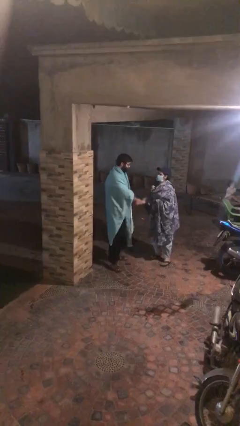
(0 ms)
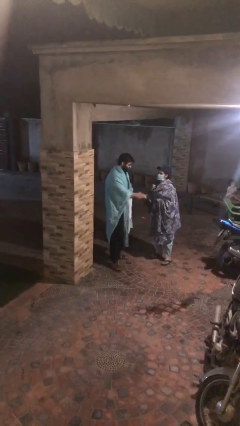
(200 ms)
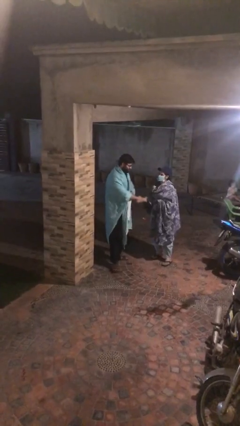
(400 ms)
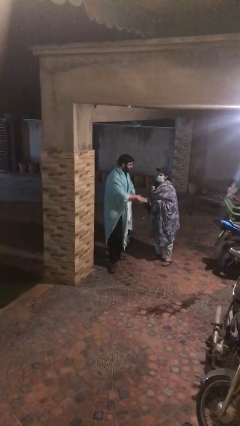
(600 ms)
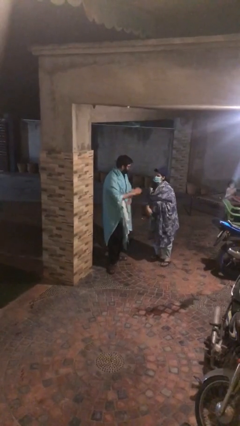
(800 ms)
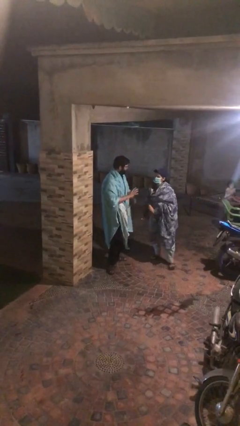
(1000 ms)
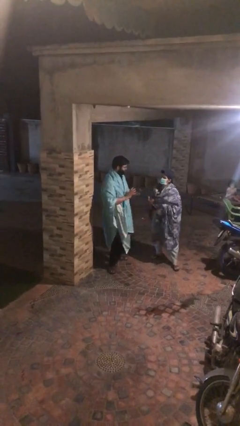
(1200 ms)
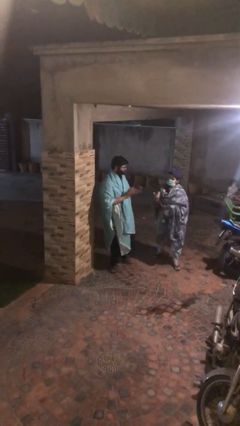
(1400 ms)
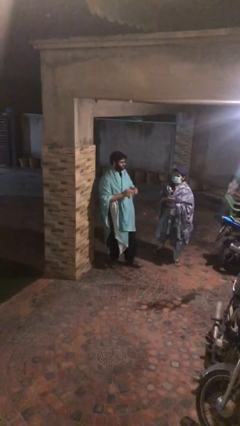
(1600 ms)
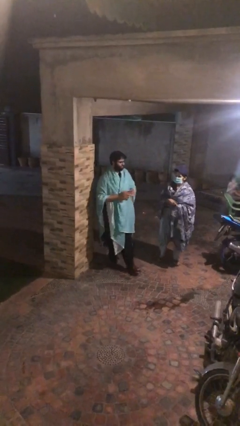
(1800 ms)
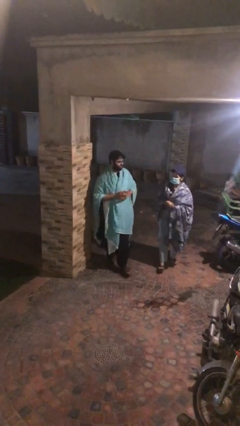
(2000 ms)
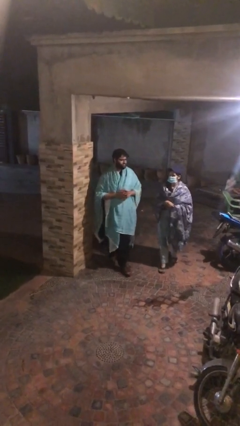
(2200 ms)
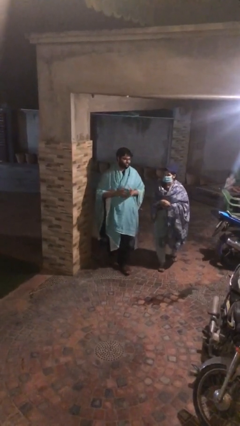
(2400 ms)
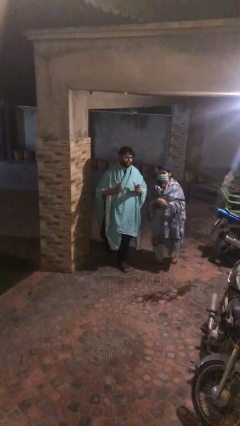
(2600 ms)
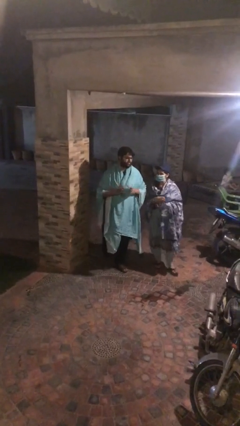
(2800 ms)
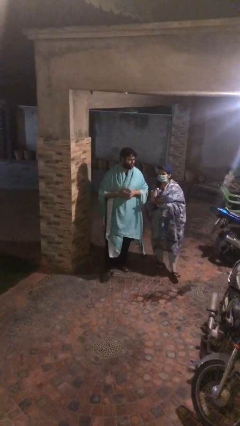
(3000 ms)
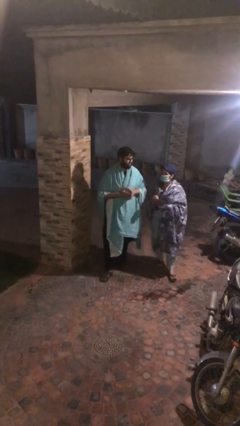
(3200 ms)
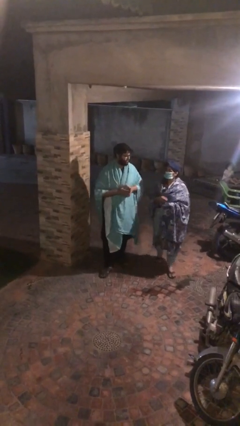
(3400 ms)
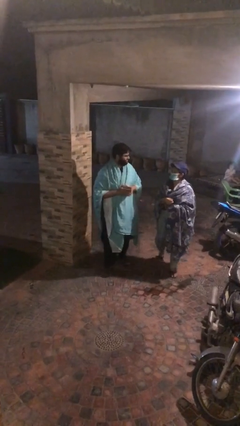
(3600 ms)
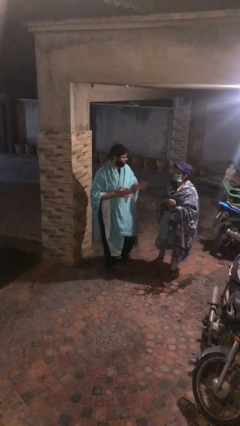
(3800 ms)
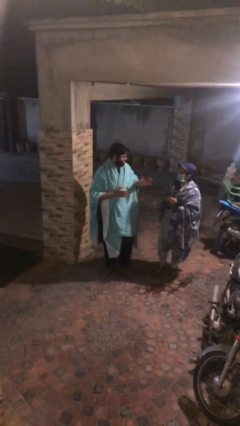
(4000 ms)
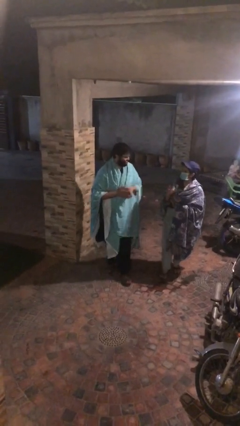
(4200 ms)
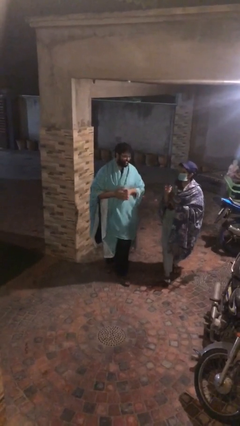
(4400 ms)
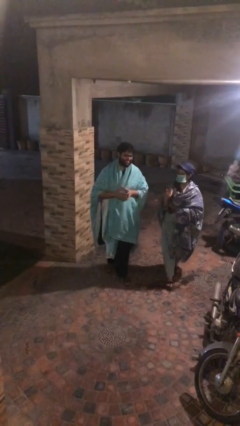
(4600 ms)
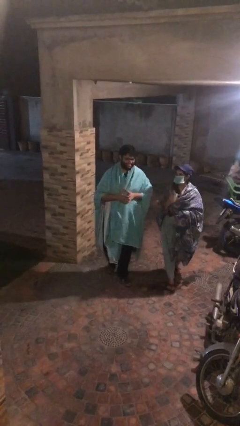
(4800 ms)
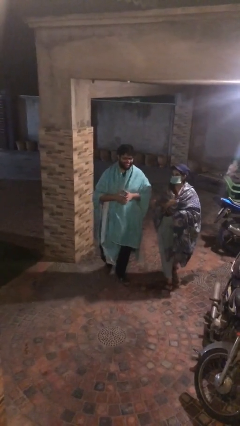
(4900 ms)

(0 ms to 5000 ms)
person talks to person

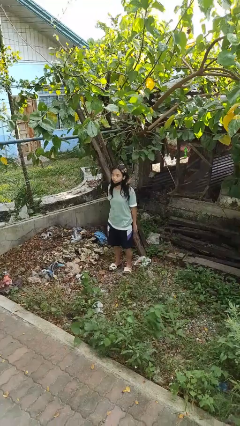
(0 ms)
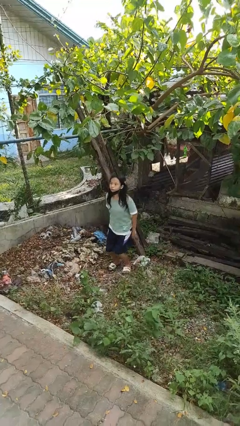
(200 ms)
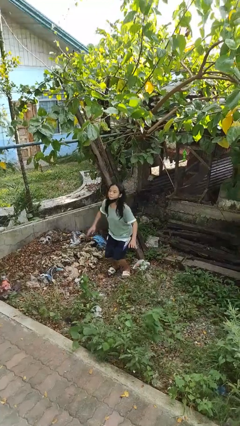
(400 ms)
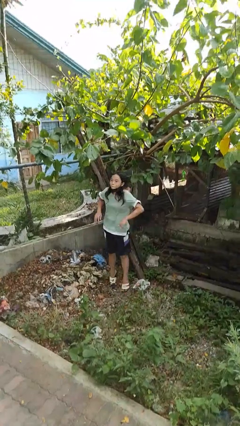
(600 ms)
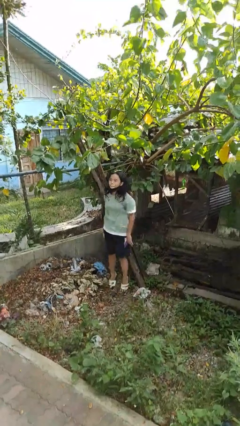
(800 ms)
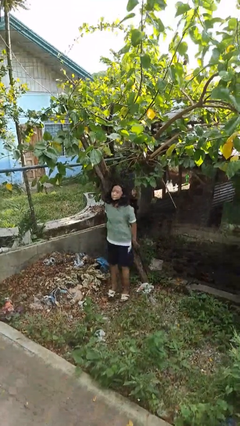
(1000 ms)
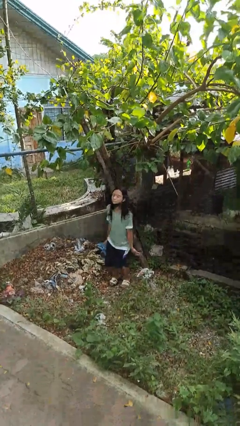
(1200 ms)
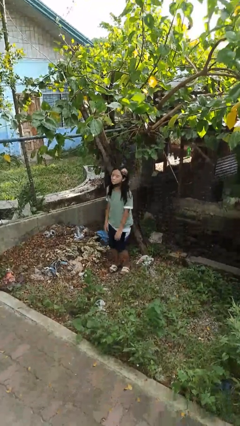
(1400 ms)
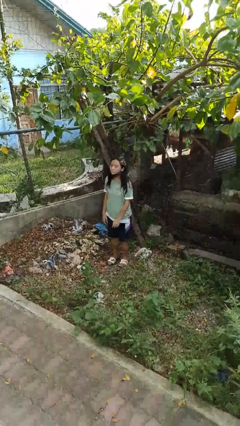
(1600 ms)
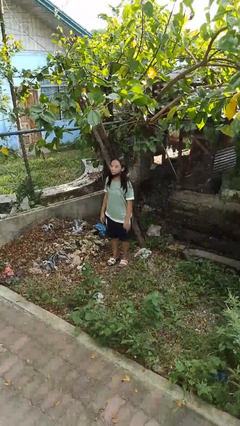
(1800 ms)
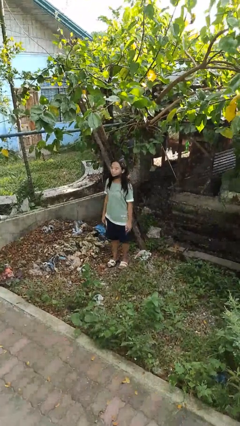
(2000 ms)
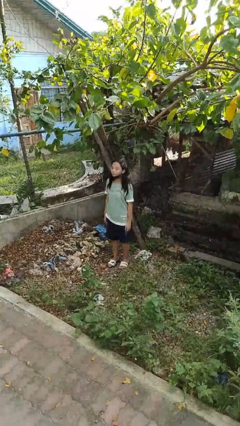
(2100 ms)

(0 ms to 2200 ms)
person jumps

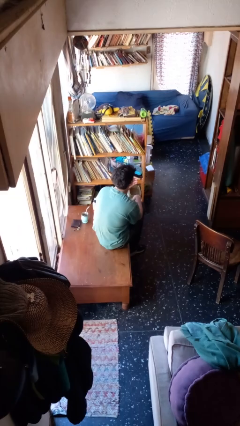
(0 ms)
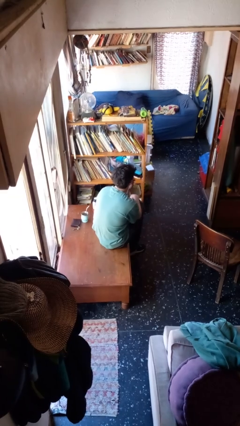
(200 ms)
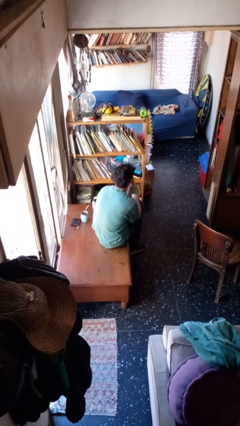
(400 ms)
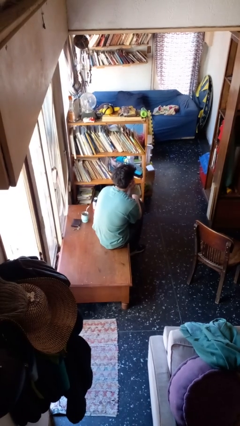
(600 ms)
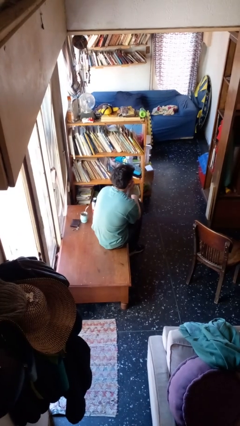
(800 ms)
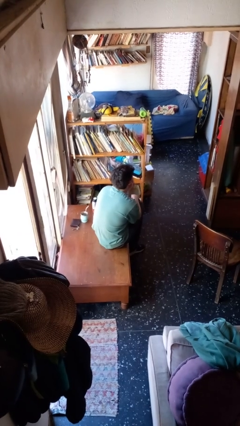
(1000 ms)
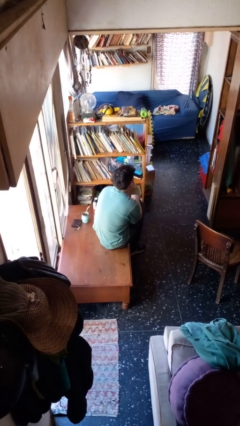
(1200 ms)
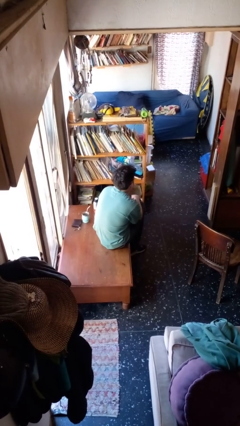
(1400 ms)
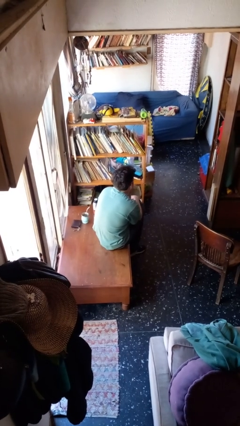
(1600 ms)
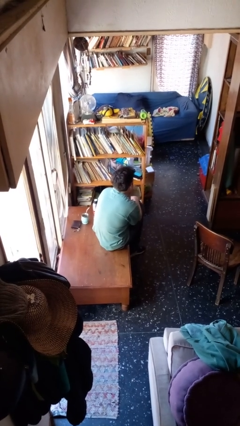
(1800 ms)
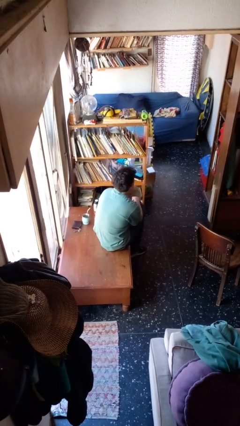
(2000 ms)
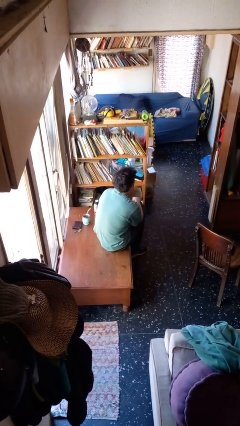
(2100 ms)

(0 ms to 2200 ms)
person strokes chin

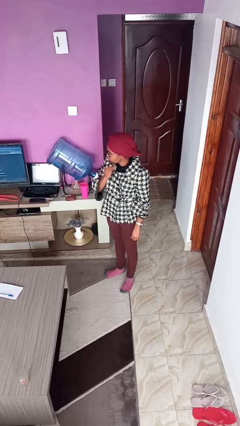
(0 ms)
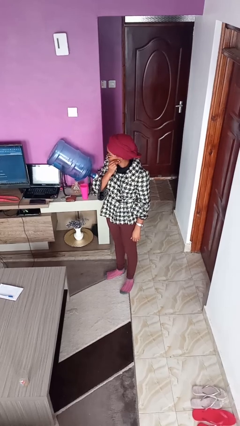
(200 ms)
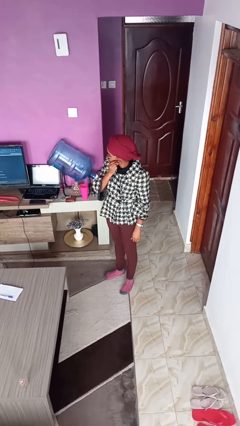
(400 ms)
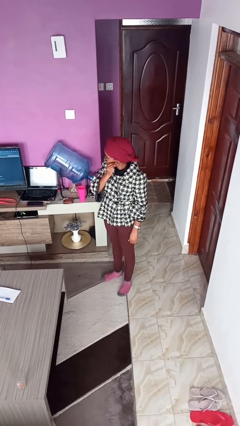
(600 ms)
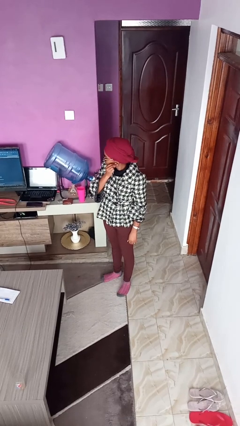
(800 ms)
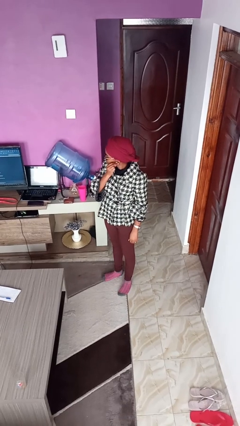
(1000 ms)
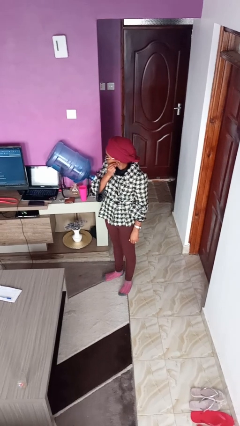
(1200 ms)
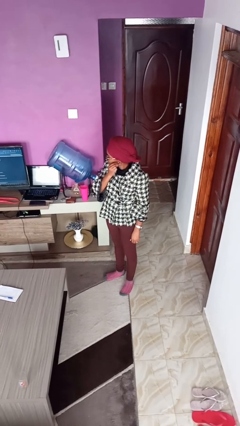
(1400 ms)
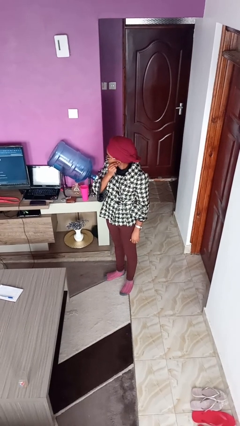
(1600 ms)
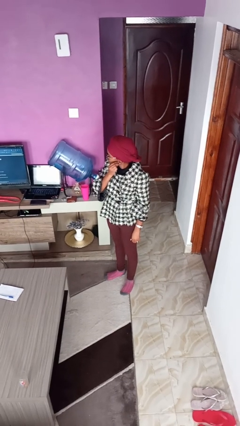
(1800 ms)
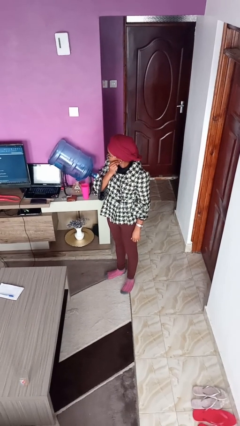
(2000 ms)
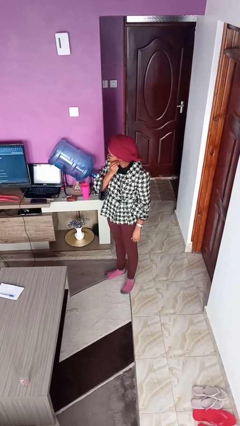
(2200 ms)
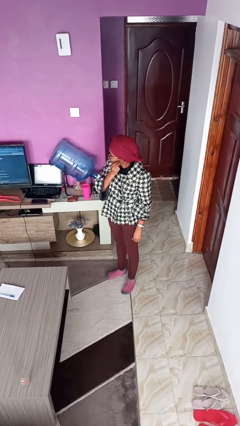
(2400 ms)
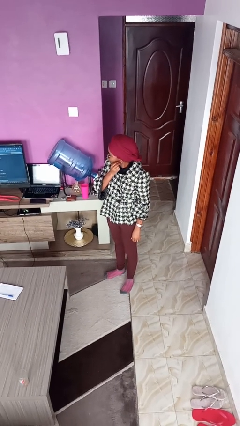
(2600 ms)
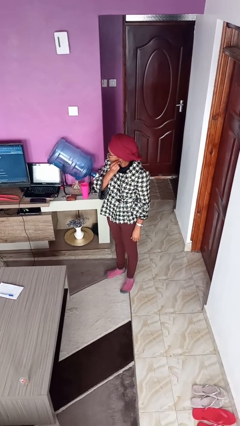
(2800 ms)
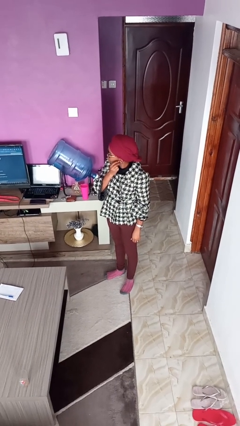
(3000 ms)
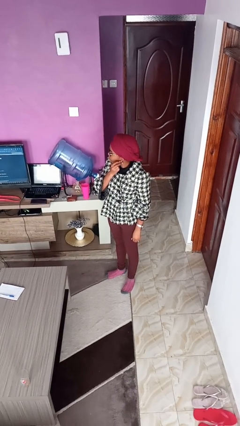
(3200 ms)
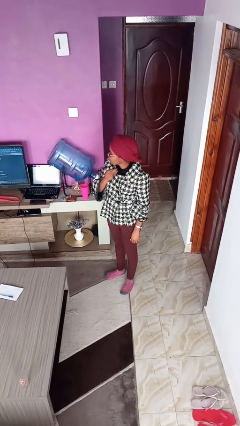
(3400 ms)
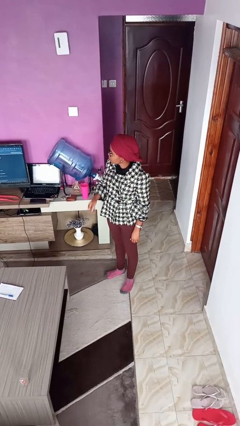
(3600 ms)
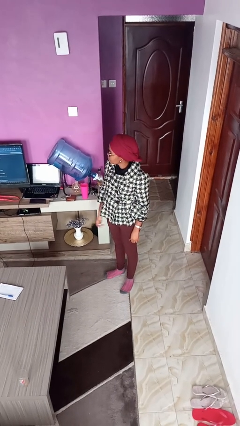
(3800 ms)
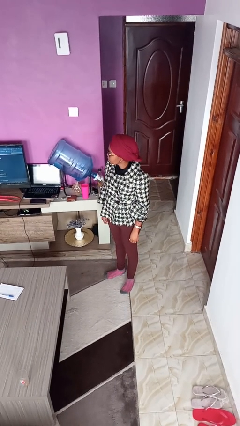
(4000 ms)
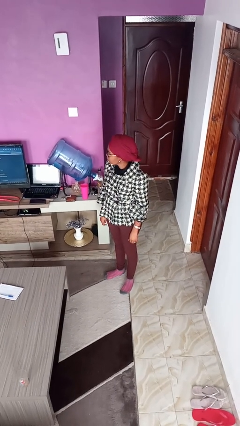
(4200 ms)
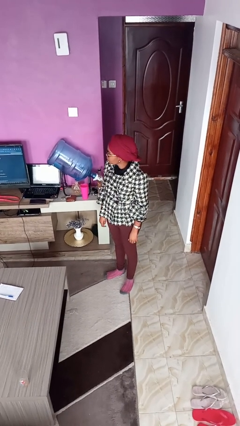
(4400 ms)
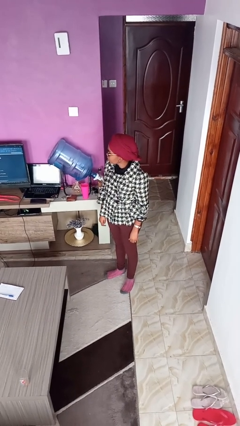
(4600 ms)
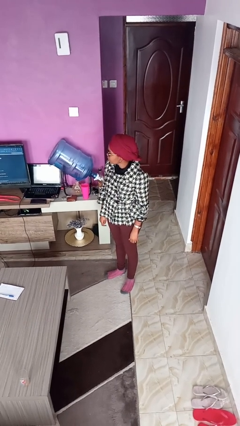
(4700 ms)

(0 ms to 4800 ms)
person puts on earrings

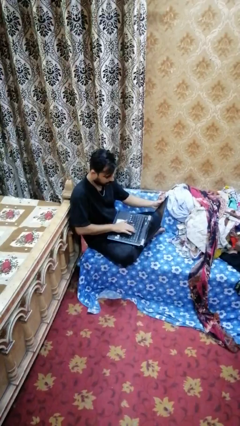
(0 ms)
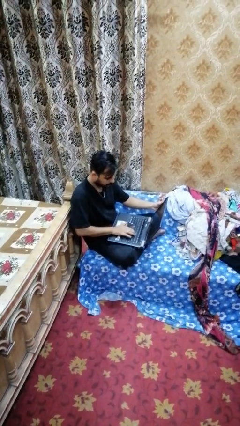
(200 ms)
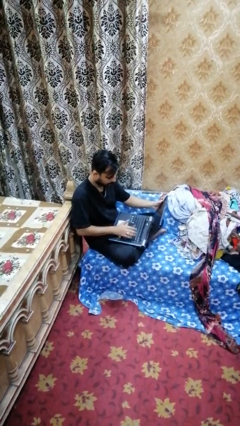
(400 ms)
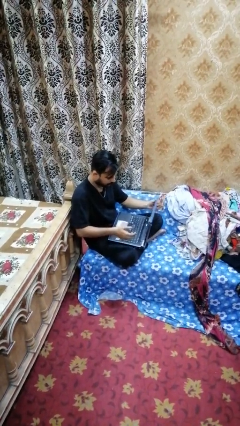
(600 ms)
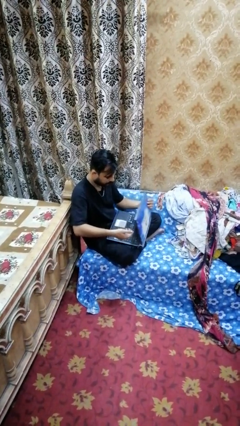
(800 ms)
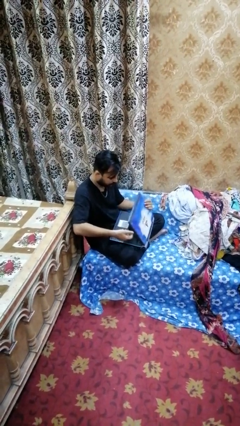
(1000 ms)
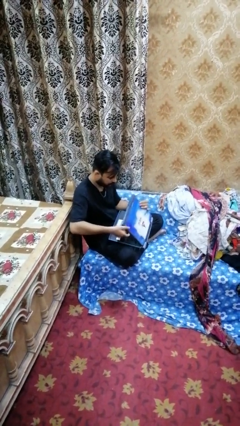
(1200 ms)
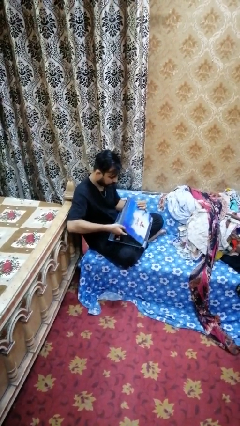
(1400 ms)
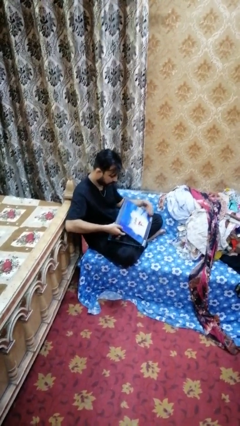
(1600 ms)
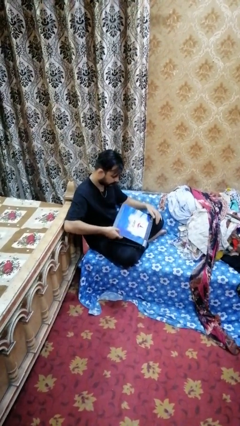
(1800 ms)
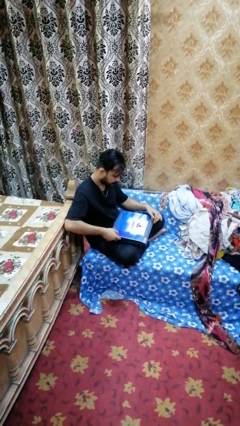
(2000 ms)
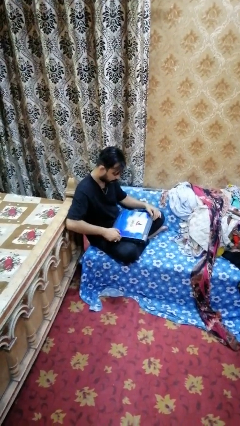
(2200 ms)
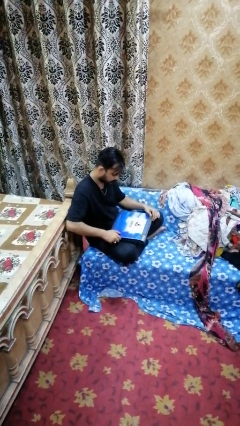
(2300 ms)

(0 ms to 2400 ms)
person closes laptop

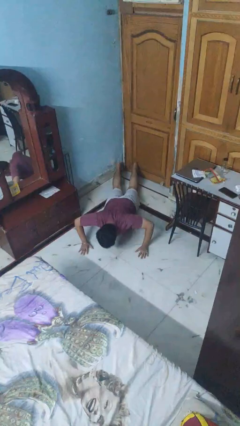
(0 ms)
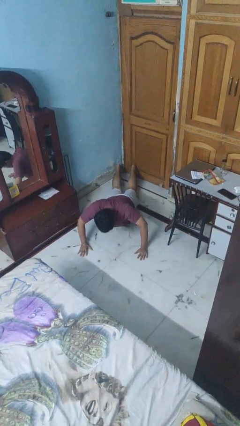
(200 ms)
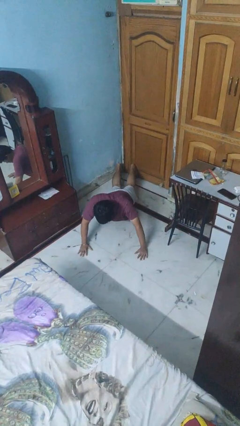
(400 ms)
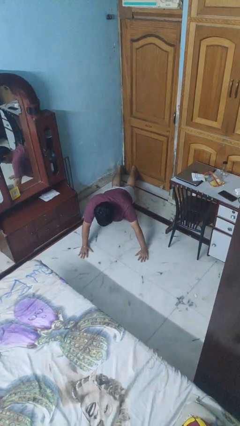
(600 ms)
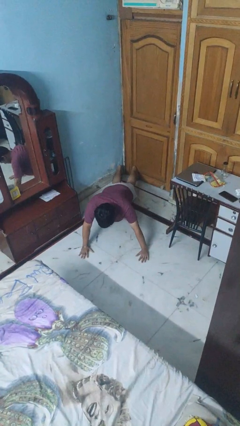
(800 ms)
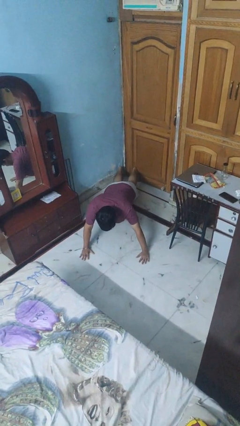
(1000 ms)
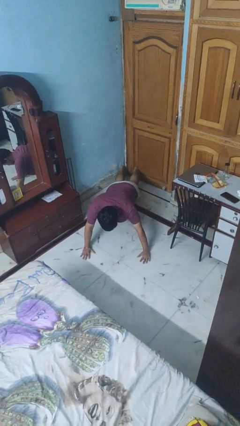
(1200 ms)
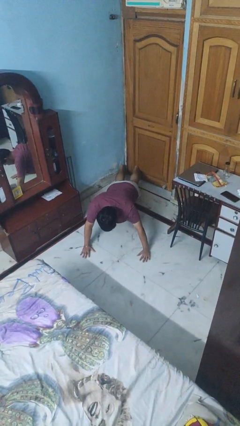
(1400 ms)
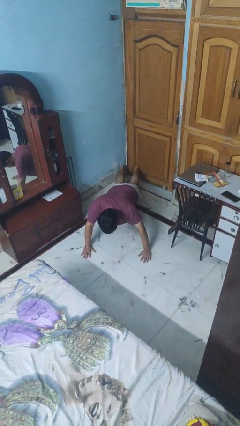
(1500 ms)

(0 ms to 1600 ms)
person exercises with pushup
